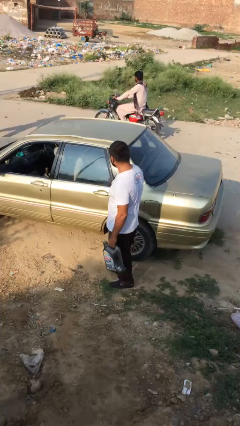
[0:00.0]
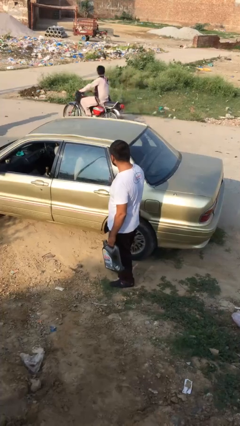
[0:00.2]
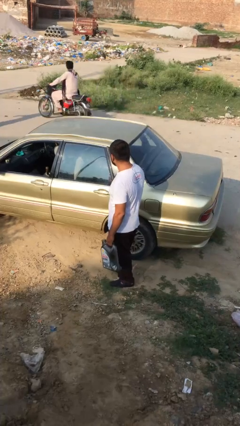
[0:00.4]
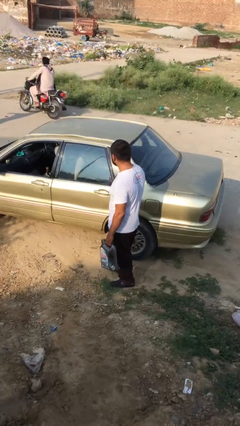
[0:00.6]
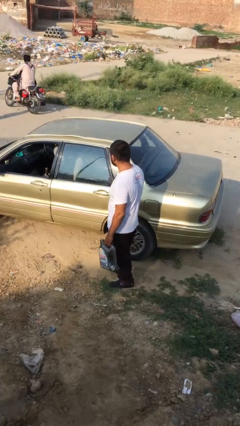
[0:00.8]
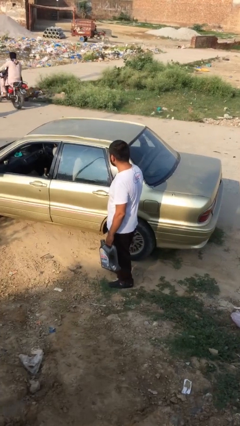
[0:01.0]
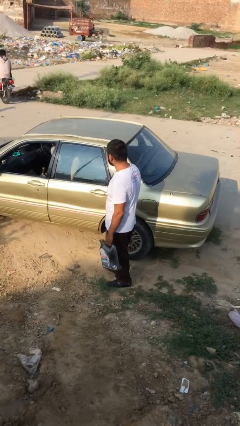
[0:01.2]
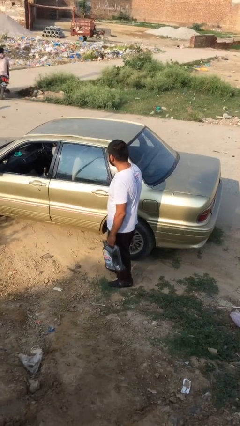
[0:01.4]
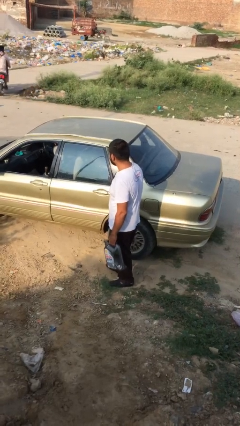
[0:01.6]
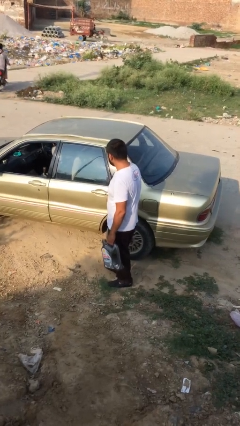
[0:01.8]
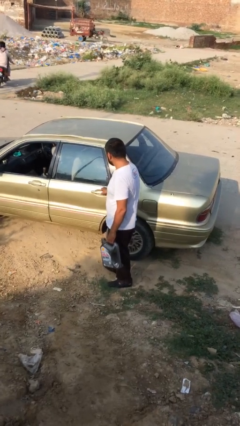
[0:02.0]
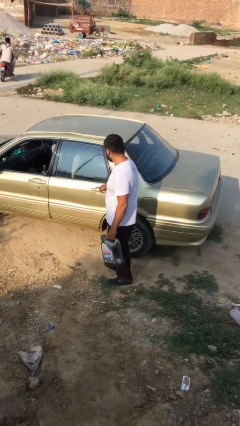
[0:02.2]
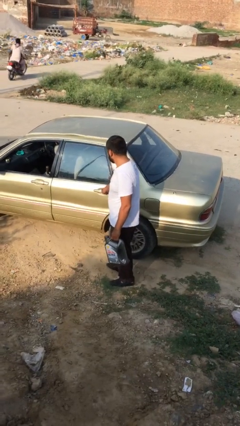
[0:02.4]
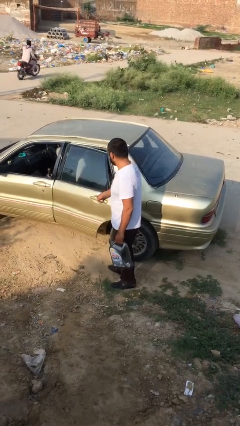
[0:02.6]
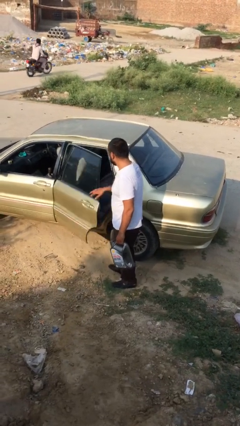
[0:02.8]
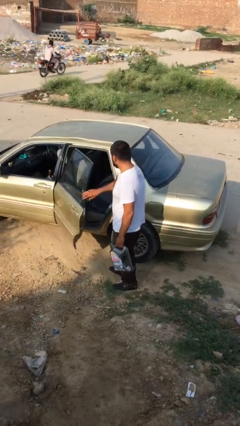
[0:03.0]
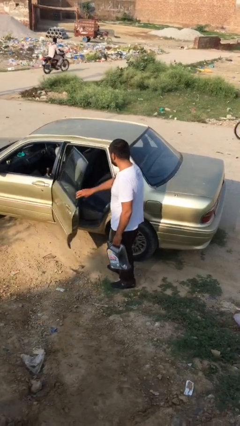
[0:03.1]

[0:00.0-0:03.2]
person opens car door

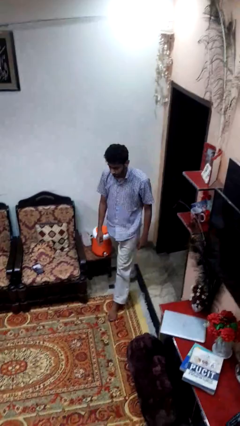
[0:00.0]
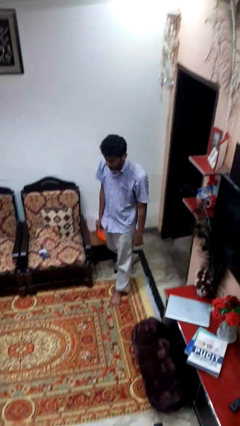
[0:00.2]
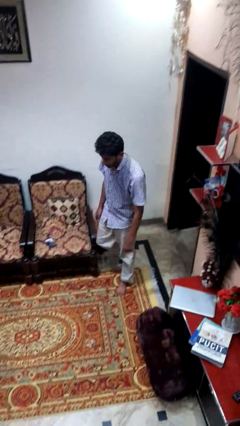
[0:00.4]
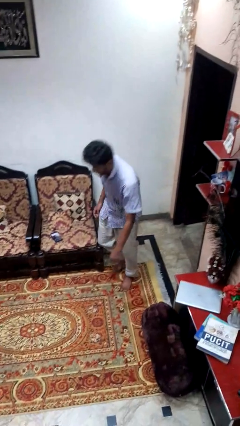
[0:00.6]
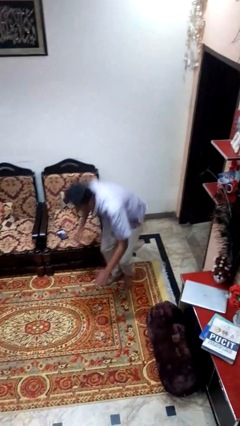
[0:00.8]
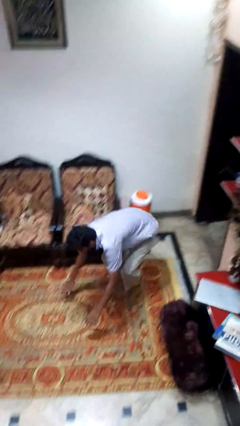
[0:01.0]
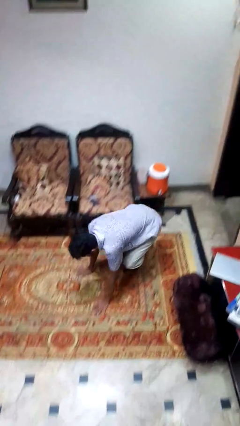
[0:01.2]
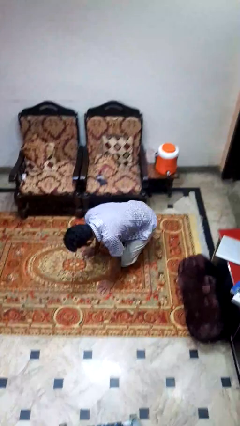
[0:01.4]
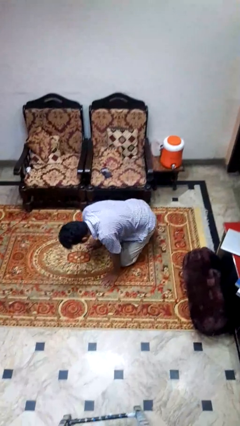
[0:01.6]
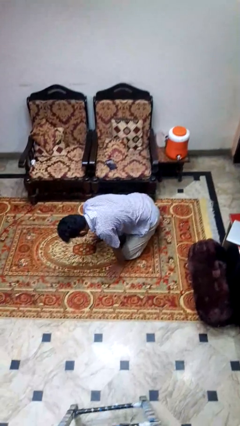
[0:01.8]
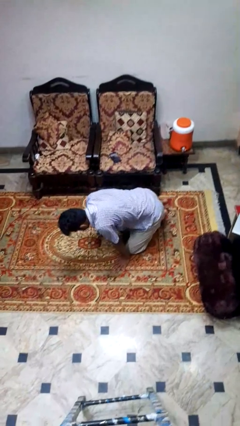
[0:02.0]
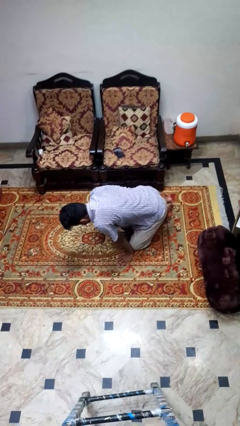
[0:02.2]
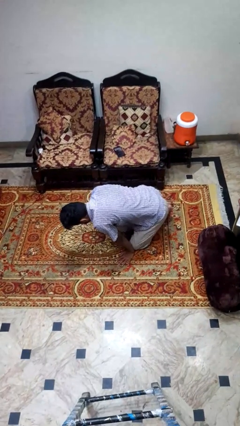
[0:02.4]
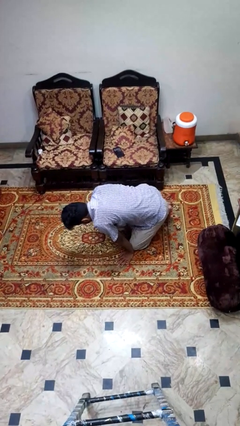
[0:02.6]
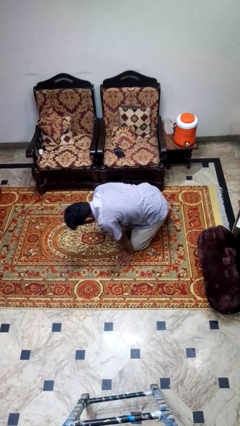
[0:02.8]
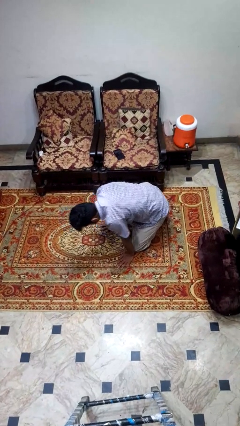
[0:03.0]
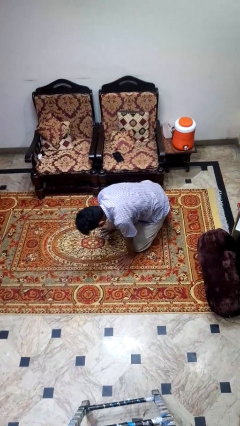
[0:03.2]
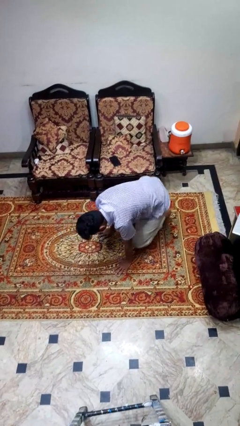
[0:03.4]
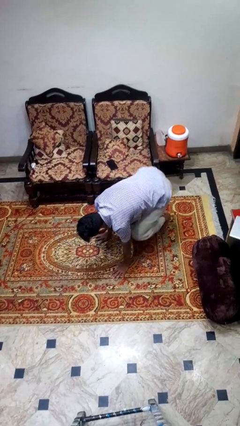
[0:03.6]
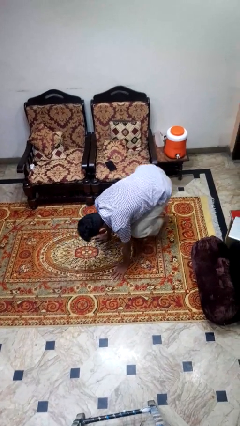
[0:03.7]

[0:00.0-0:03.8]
person trips on object on floor

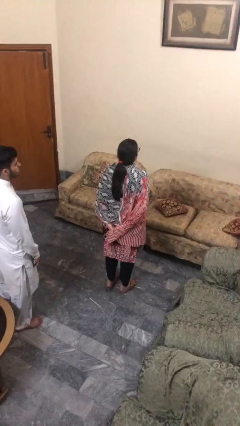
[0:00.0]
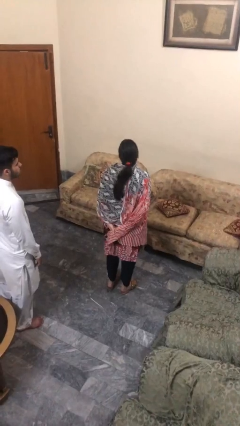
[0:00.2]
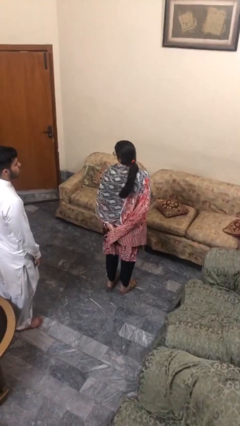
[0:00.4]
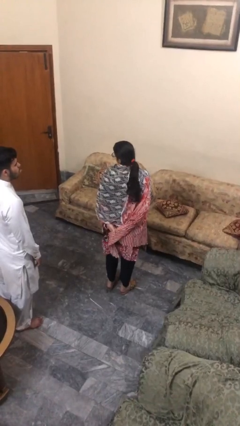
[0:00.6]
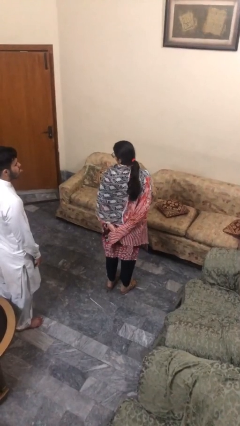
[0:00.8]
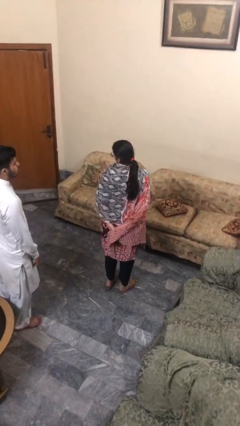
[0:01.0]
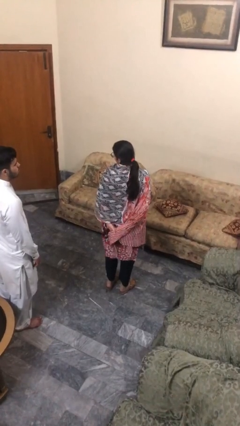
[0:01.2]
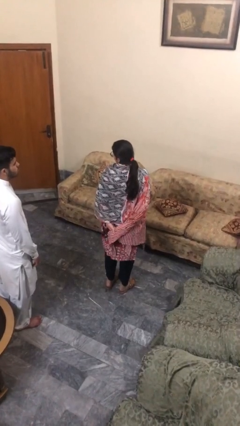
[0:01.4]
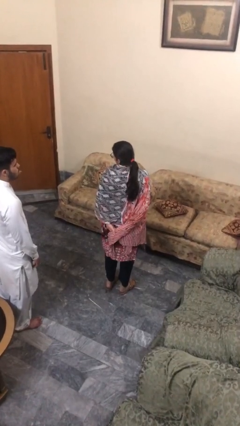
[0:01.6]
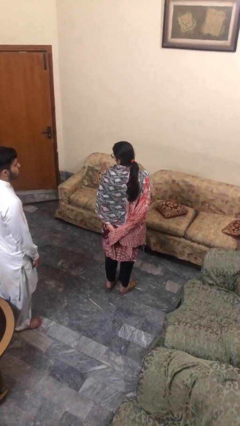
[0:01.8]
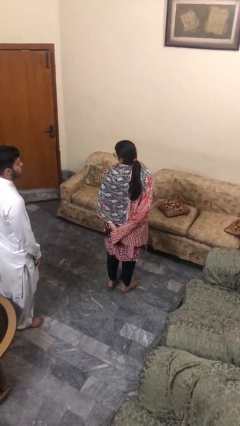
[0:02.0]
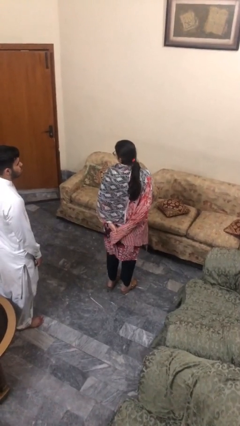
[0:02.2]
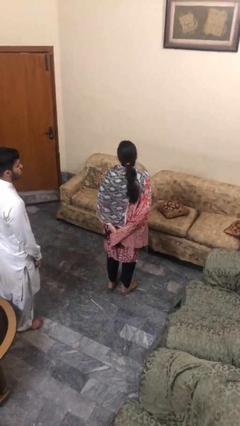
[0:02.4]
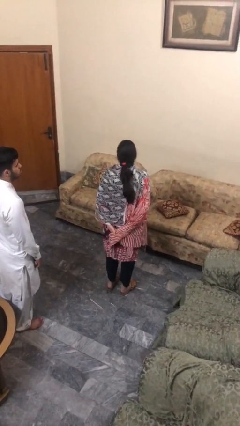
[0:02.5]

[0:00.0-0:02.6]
person looks over shoulder

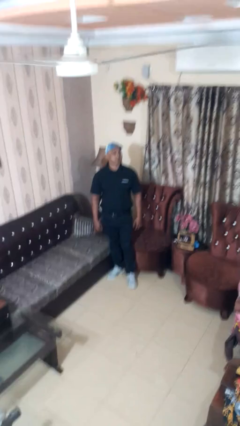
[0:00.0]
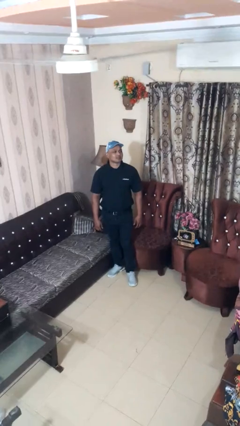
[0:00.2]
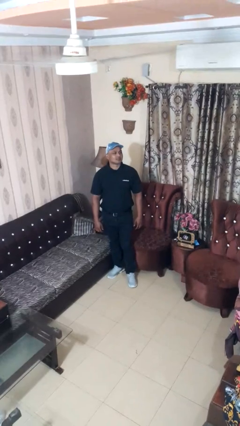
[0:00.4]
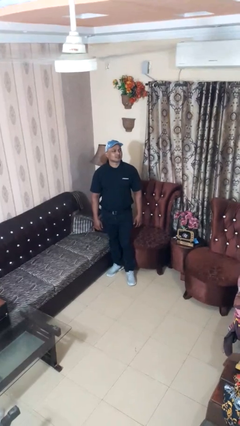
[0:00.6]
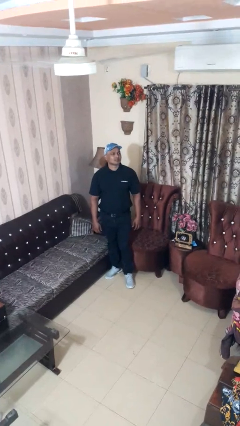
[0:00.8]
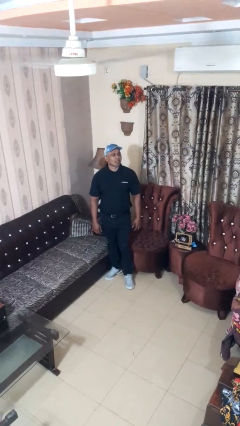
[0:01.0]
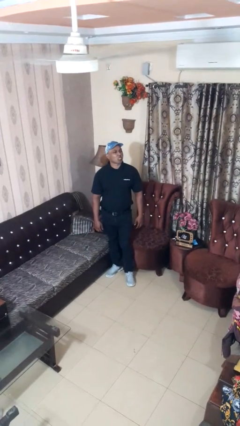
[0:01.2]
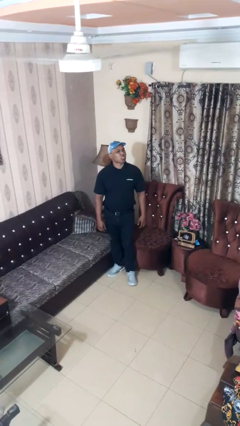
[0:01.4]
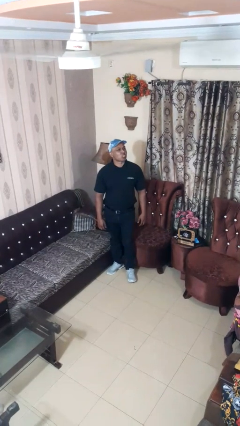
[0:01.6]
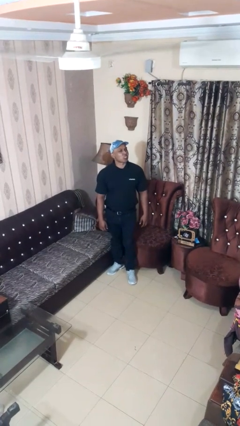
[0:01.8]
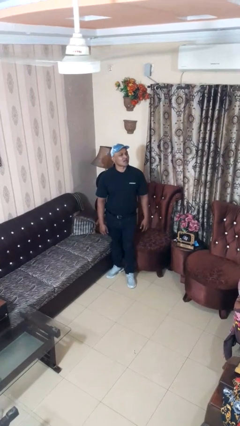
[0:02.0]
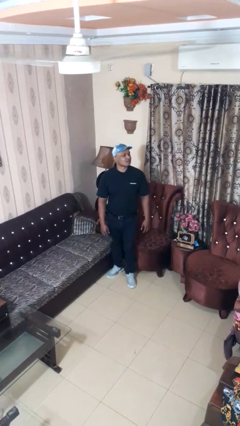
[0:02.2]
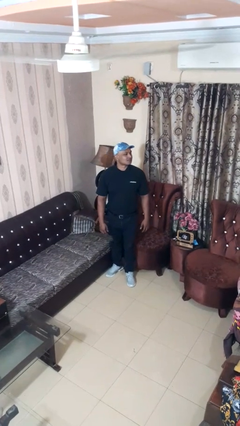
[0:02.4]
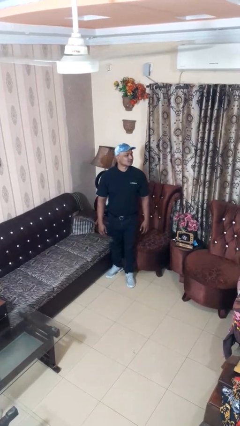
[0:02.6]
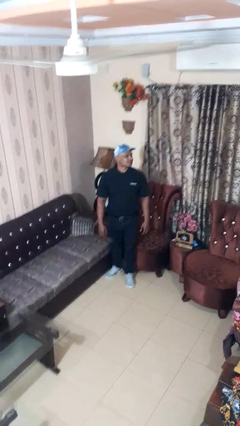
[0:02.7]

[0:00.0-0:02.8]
person sticks out tongue

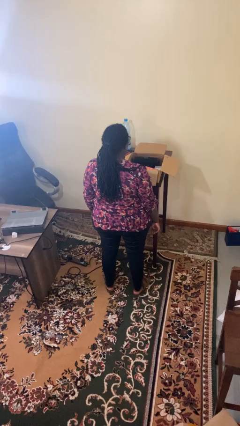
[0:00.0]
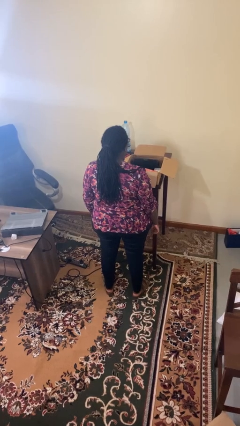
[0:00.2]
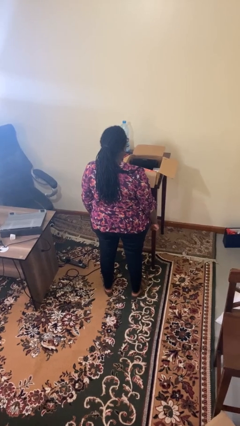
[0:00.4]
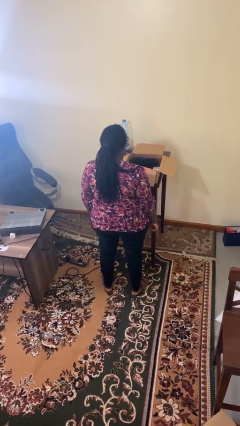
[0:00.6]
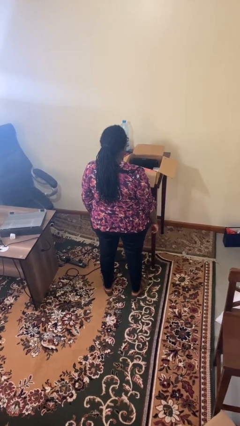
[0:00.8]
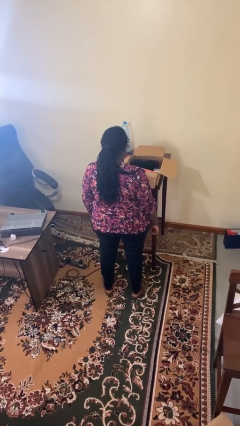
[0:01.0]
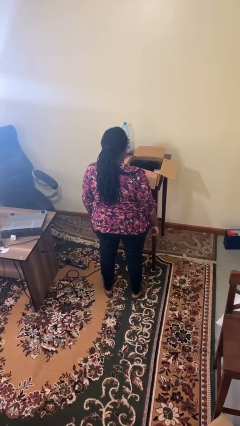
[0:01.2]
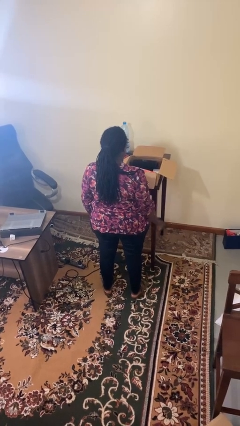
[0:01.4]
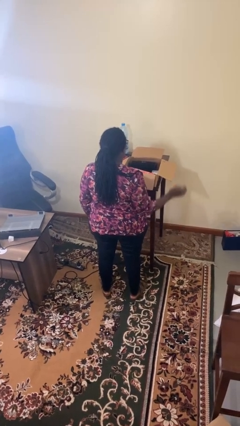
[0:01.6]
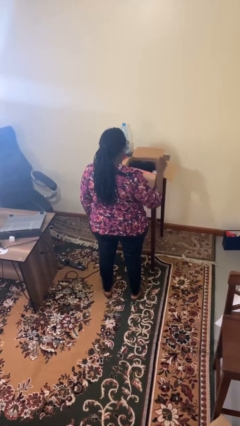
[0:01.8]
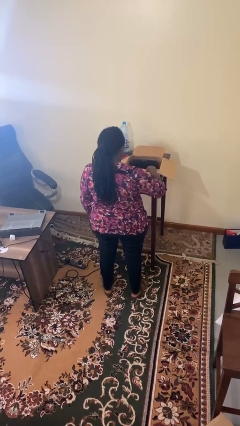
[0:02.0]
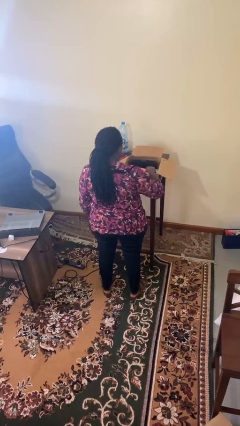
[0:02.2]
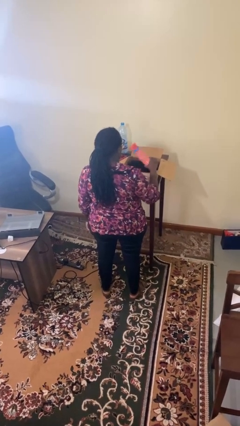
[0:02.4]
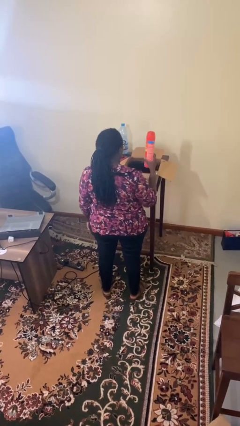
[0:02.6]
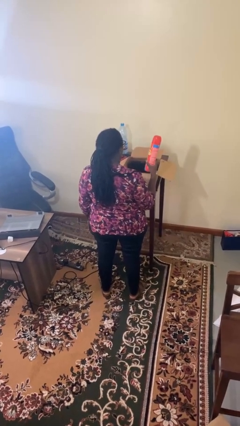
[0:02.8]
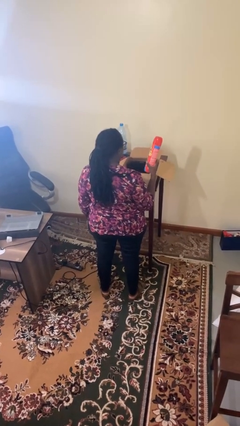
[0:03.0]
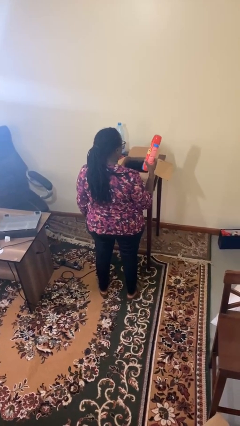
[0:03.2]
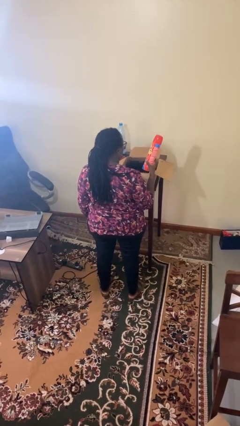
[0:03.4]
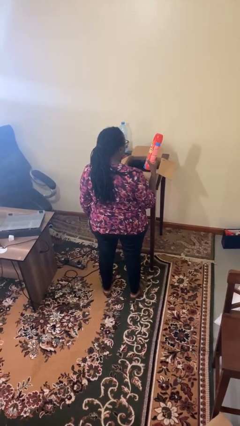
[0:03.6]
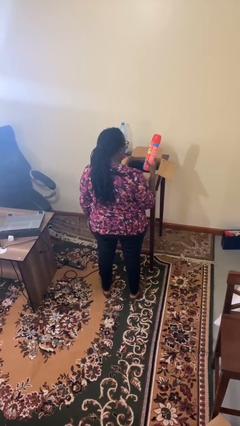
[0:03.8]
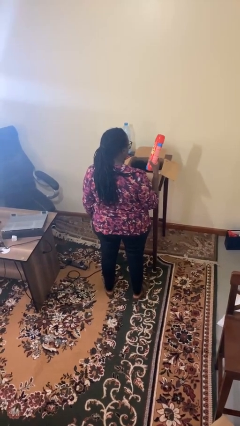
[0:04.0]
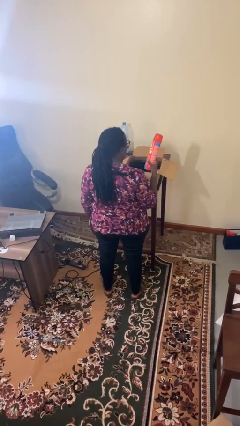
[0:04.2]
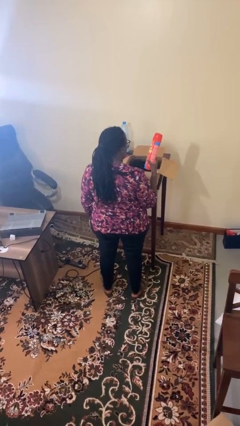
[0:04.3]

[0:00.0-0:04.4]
person takes object from box

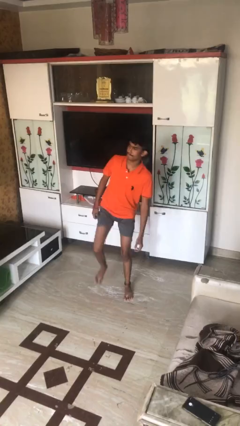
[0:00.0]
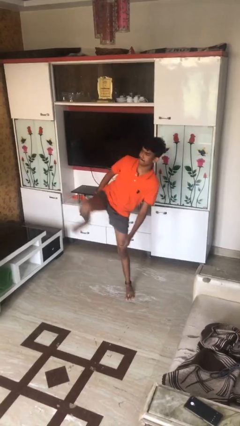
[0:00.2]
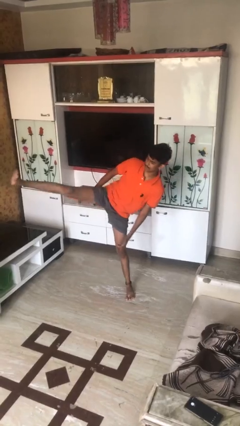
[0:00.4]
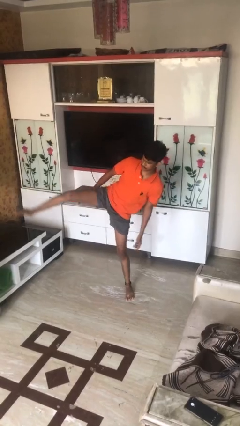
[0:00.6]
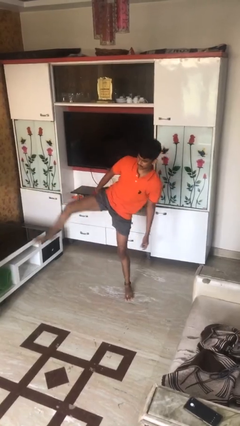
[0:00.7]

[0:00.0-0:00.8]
person karate kicks
